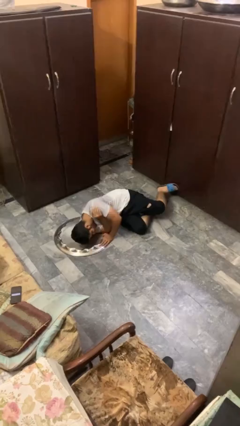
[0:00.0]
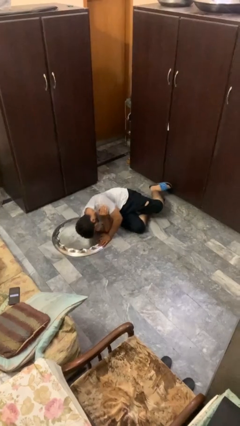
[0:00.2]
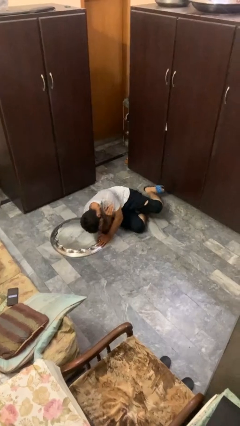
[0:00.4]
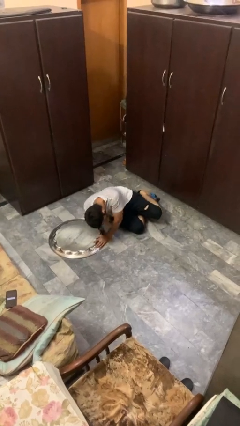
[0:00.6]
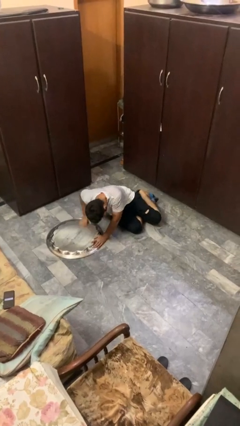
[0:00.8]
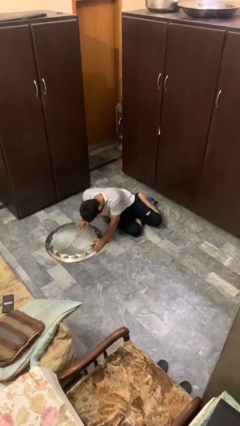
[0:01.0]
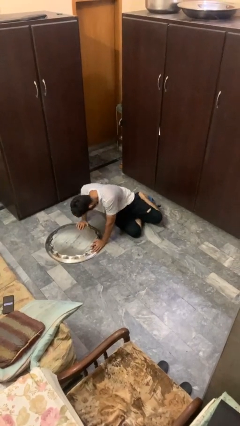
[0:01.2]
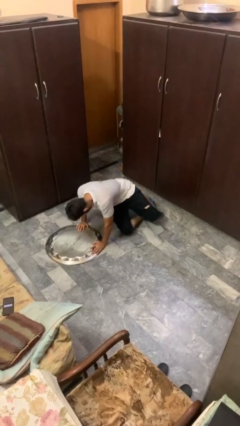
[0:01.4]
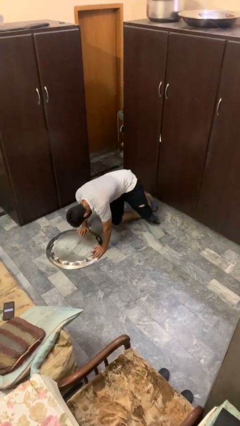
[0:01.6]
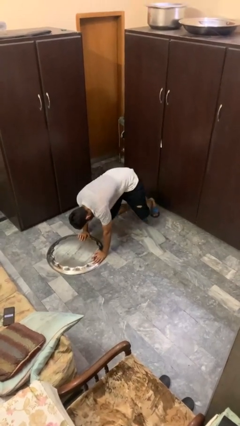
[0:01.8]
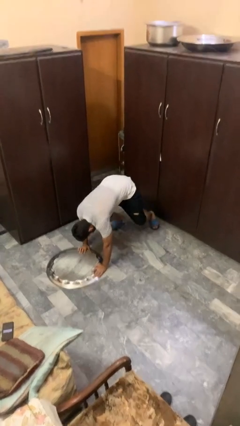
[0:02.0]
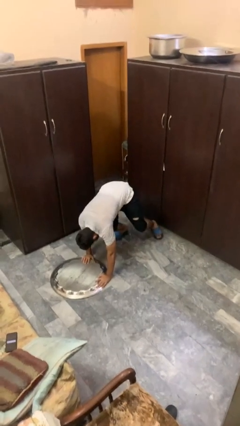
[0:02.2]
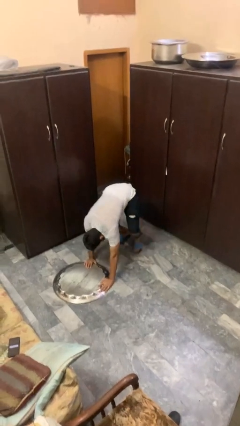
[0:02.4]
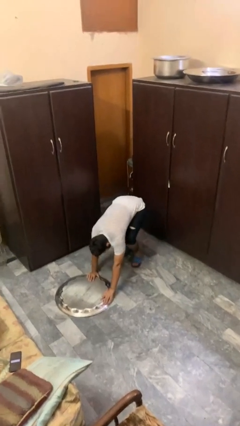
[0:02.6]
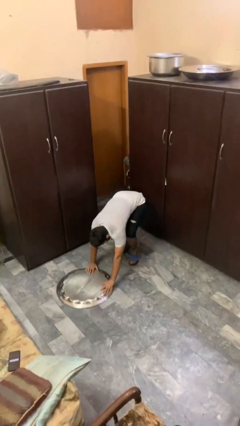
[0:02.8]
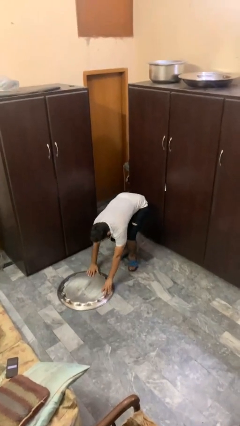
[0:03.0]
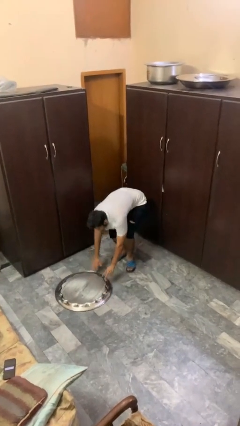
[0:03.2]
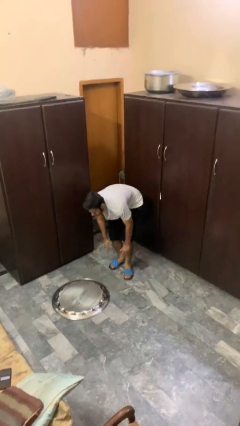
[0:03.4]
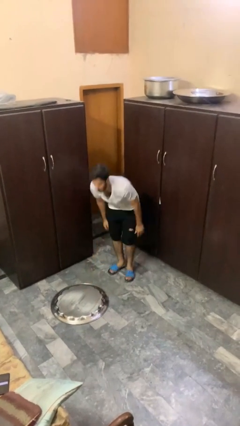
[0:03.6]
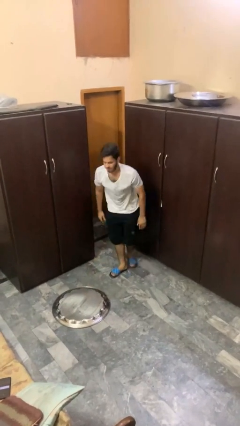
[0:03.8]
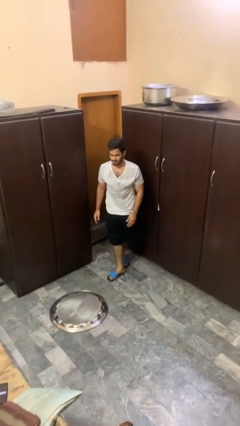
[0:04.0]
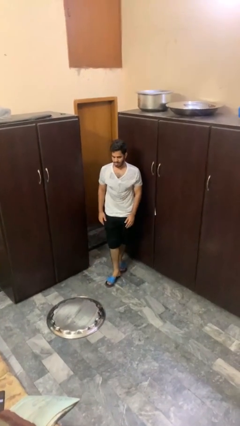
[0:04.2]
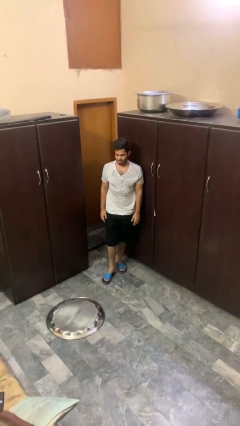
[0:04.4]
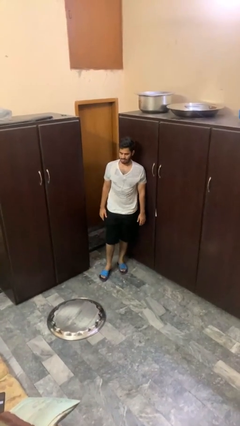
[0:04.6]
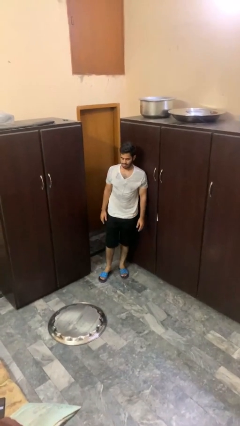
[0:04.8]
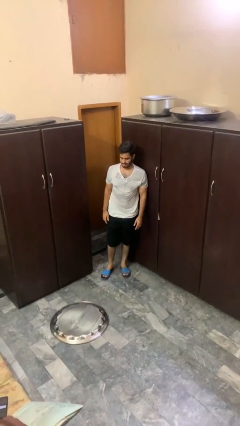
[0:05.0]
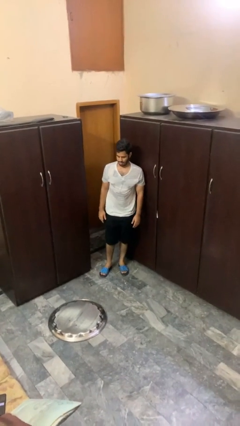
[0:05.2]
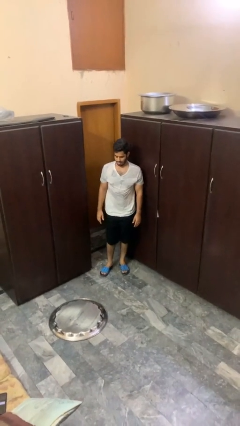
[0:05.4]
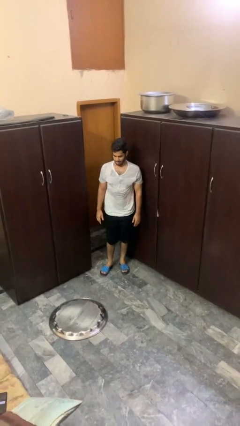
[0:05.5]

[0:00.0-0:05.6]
person stands up from floor

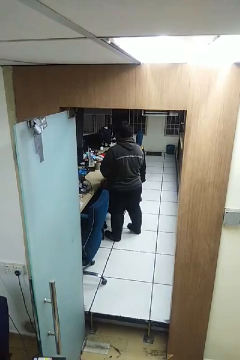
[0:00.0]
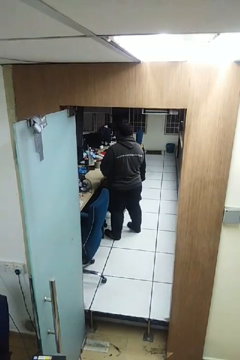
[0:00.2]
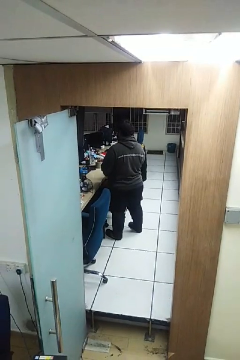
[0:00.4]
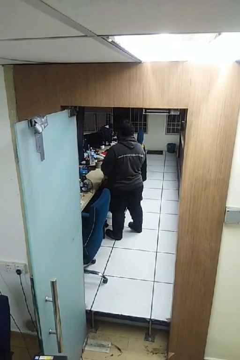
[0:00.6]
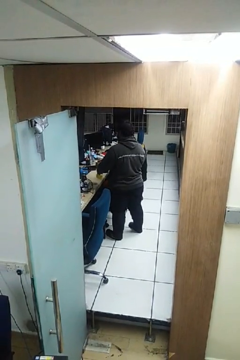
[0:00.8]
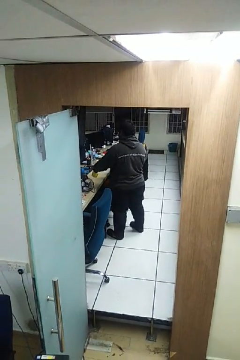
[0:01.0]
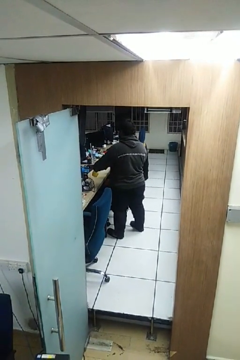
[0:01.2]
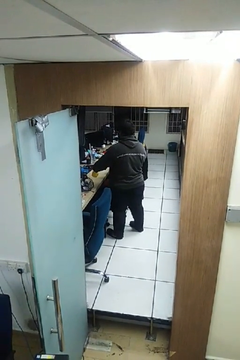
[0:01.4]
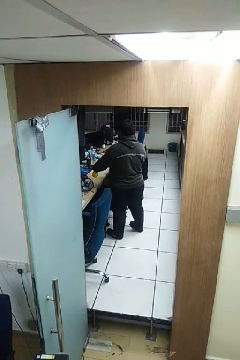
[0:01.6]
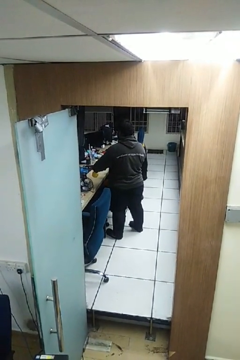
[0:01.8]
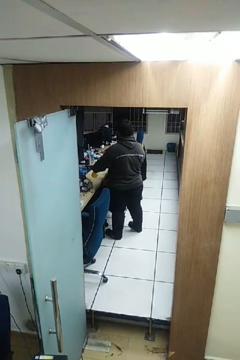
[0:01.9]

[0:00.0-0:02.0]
person sprays from bottle

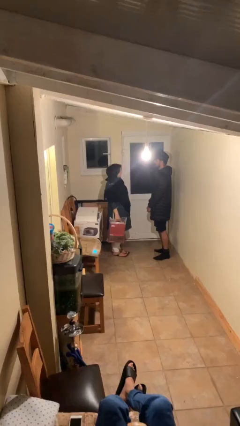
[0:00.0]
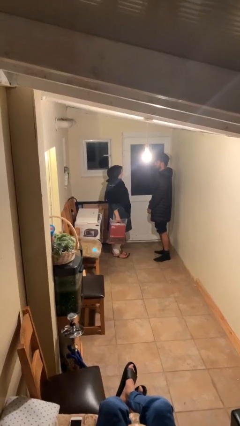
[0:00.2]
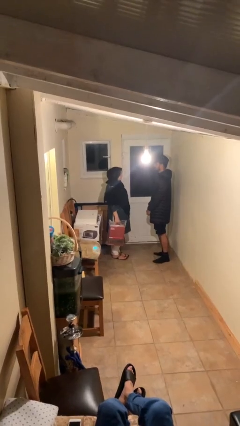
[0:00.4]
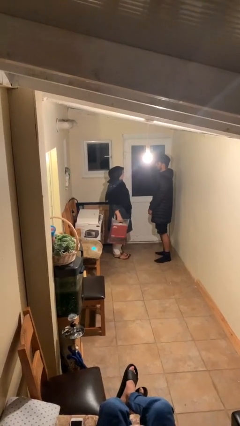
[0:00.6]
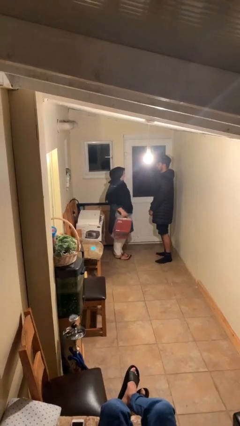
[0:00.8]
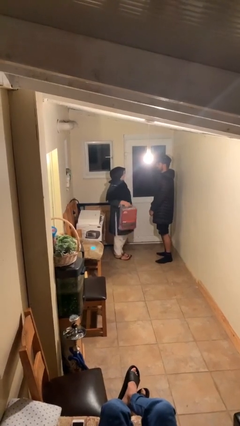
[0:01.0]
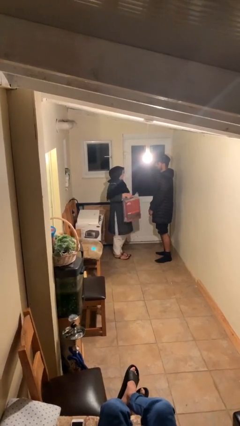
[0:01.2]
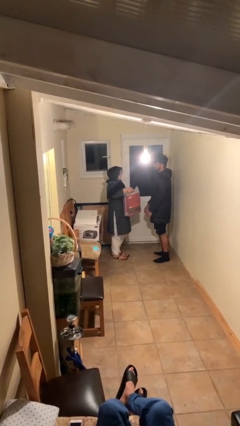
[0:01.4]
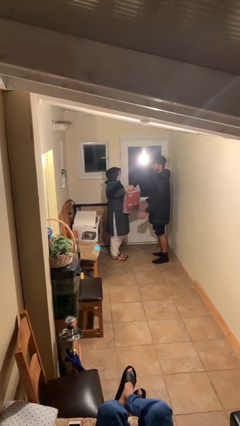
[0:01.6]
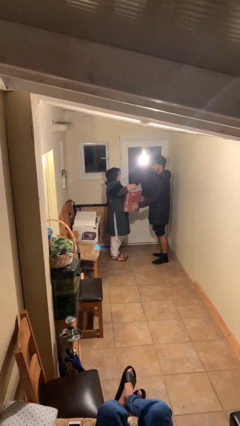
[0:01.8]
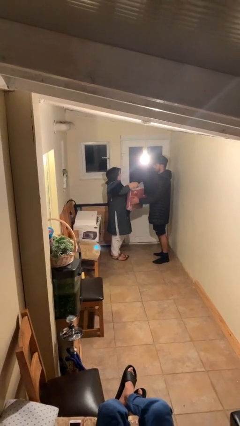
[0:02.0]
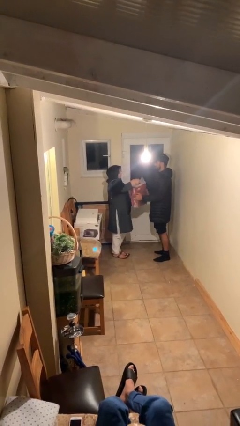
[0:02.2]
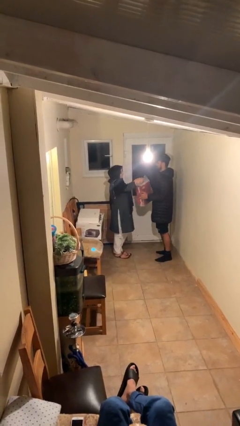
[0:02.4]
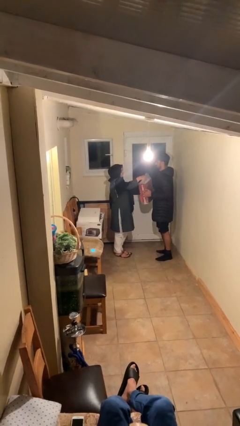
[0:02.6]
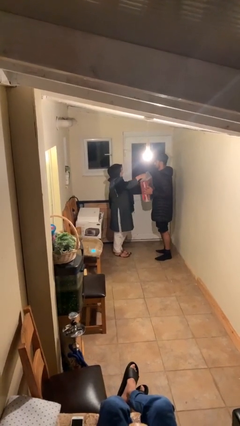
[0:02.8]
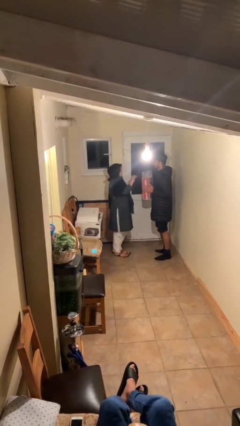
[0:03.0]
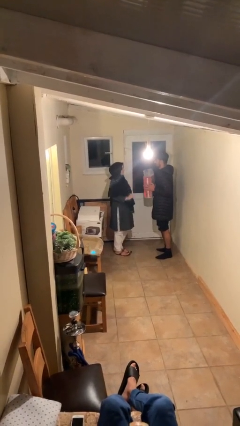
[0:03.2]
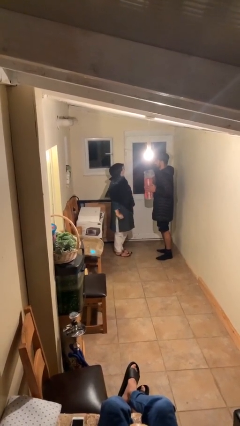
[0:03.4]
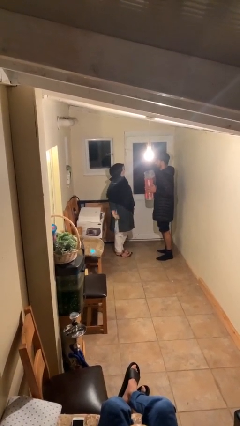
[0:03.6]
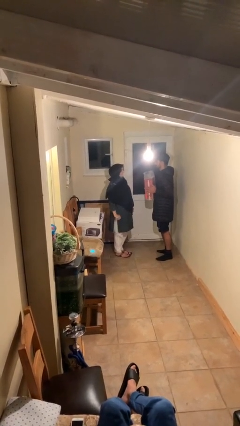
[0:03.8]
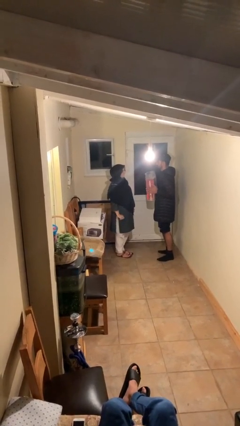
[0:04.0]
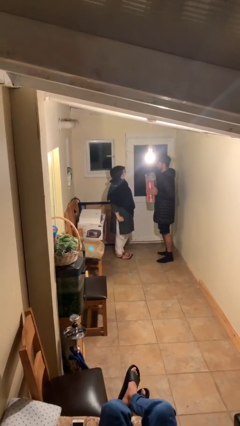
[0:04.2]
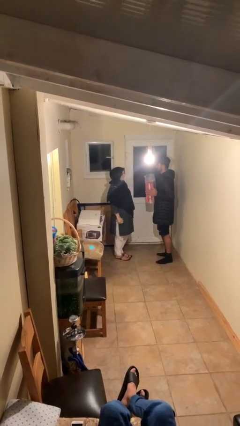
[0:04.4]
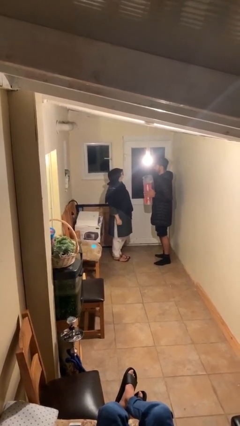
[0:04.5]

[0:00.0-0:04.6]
person transfers object to person

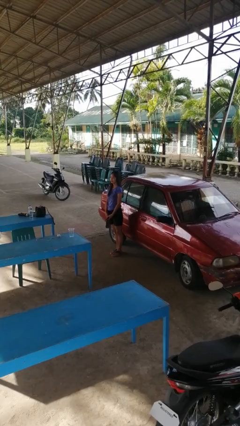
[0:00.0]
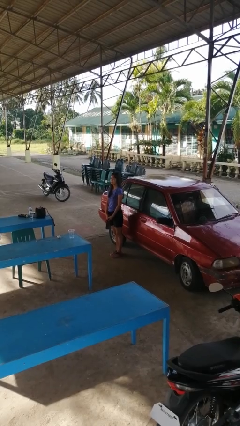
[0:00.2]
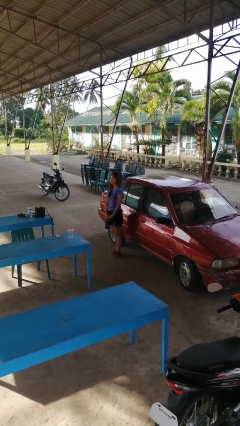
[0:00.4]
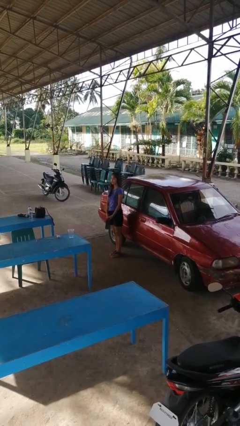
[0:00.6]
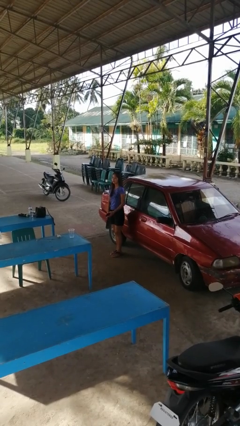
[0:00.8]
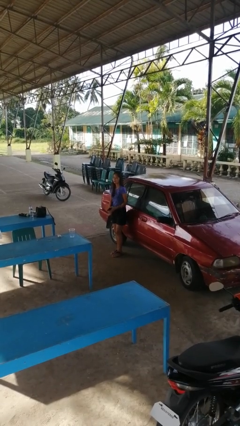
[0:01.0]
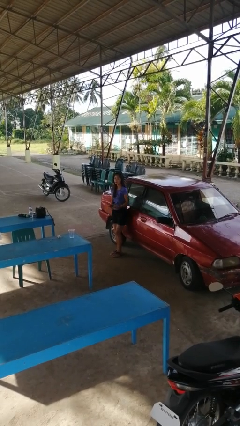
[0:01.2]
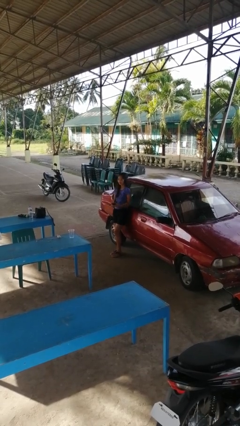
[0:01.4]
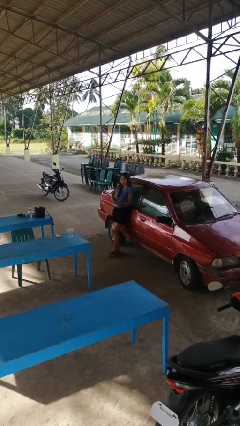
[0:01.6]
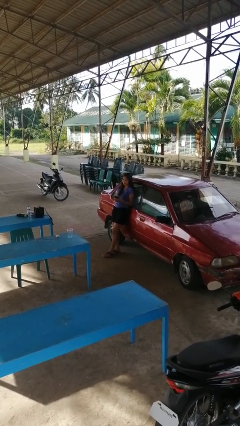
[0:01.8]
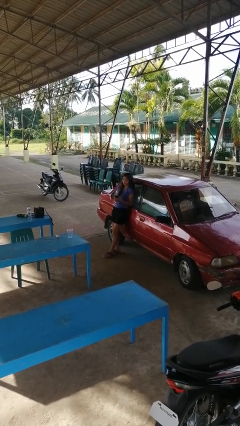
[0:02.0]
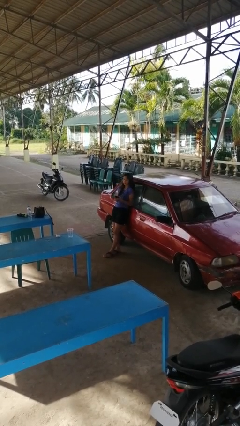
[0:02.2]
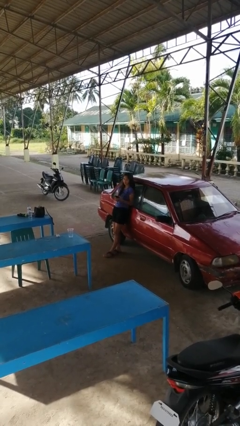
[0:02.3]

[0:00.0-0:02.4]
person leans against car

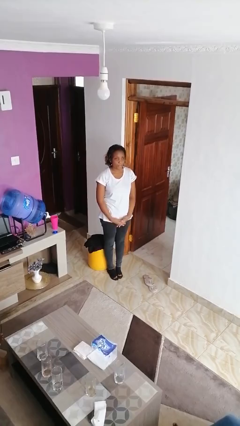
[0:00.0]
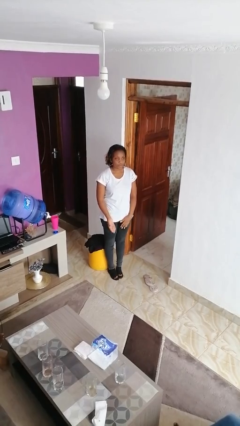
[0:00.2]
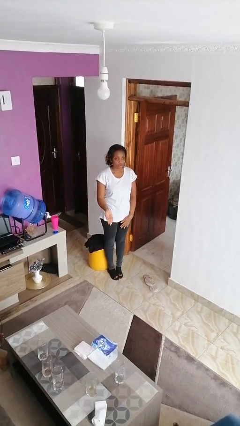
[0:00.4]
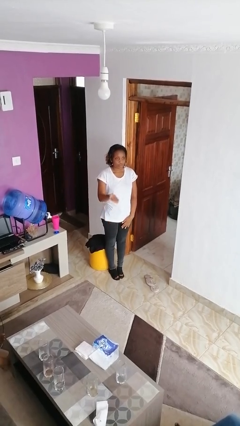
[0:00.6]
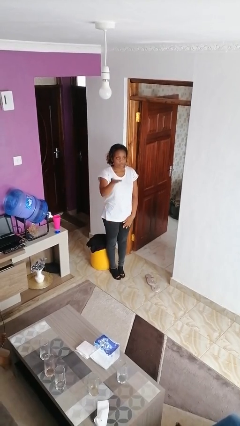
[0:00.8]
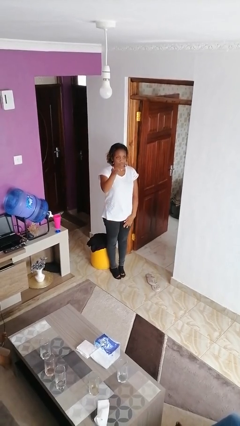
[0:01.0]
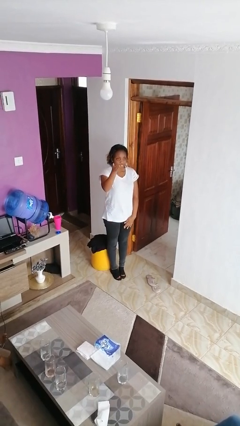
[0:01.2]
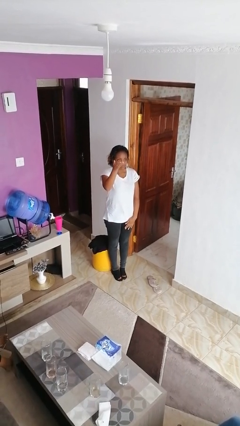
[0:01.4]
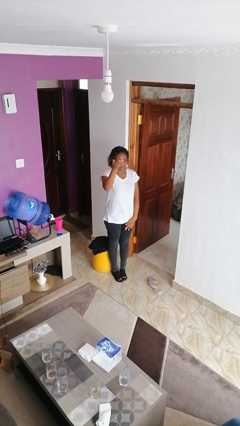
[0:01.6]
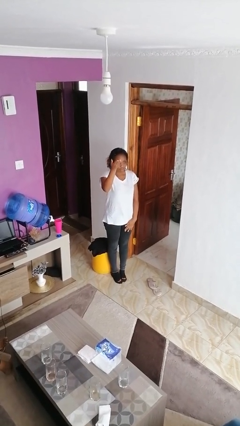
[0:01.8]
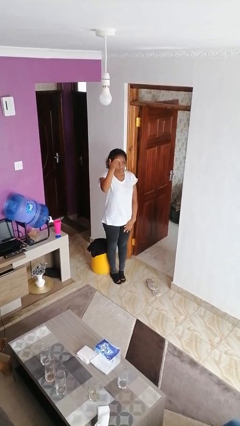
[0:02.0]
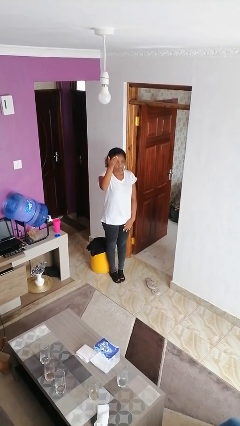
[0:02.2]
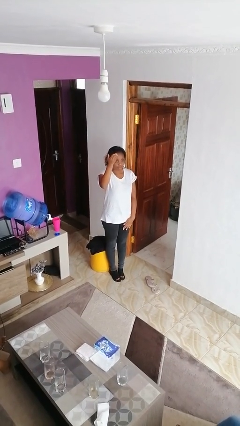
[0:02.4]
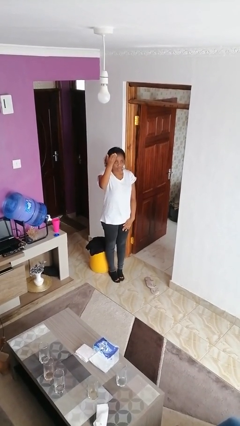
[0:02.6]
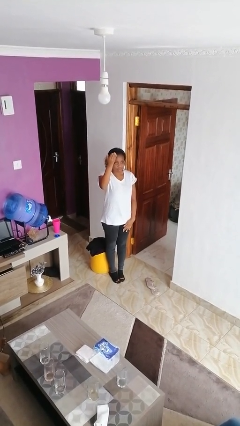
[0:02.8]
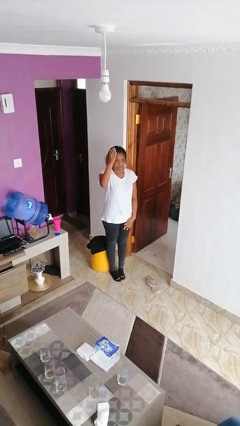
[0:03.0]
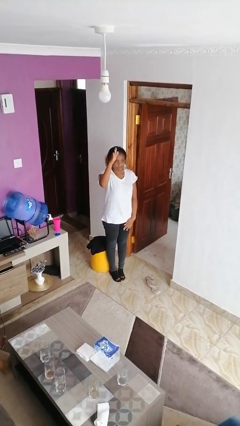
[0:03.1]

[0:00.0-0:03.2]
person gestures swipe up
